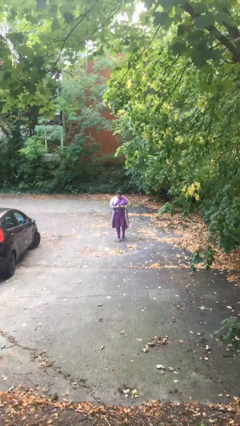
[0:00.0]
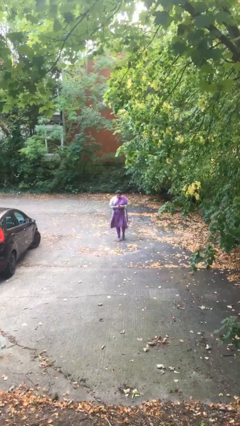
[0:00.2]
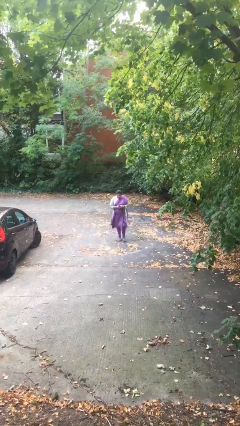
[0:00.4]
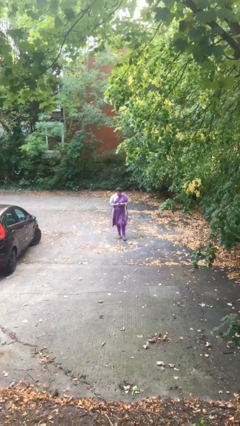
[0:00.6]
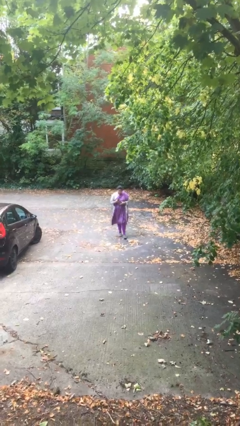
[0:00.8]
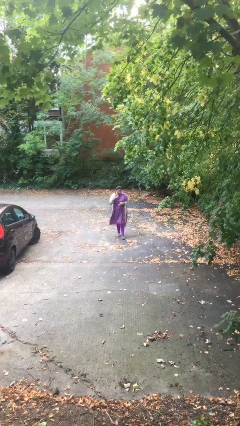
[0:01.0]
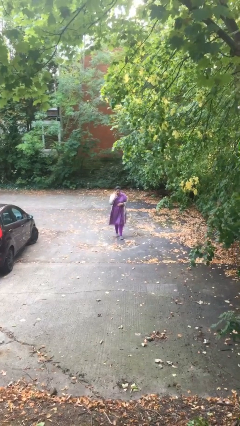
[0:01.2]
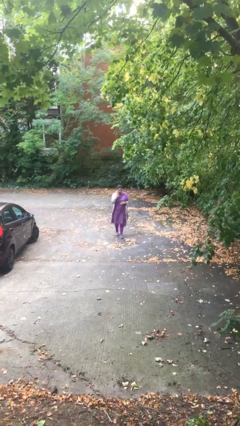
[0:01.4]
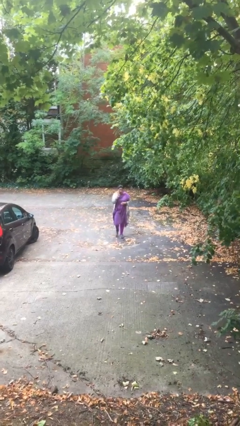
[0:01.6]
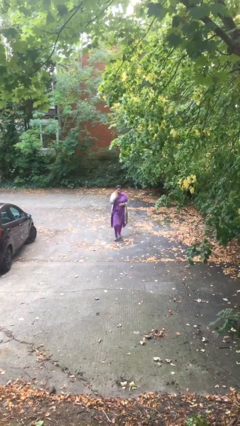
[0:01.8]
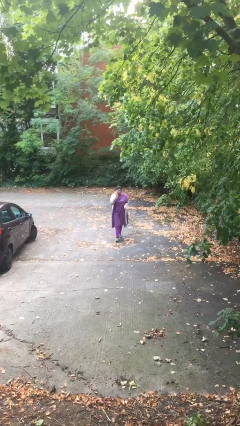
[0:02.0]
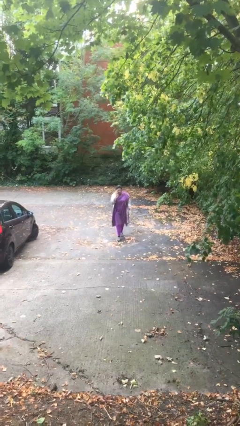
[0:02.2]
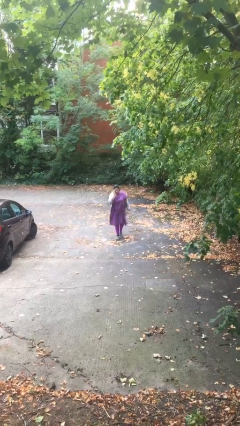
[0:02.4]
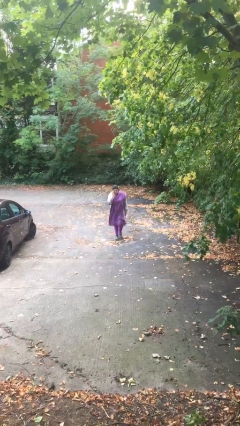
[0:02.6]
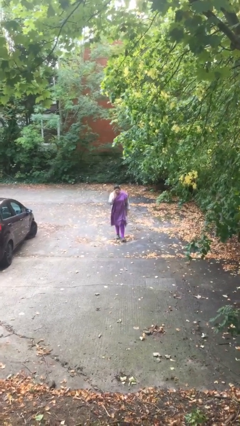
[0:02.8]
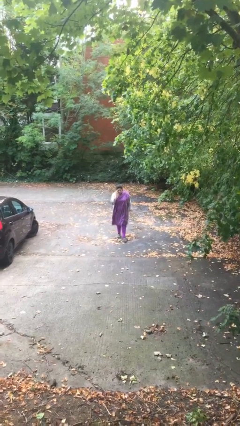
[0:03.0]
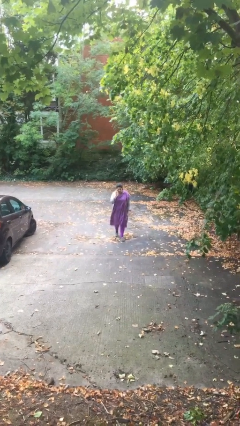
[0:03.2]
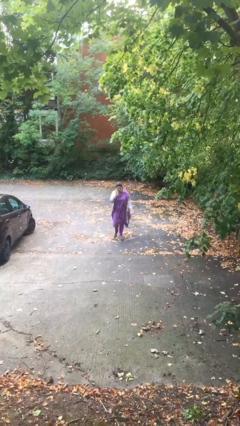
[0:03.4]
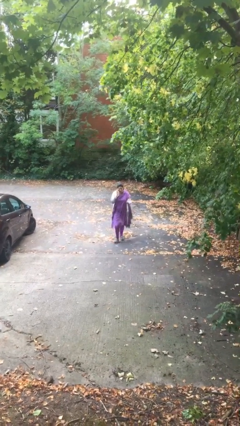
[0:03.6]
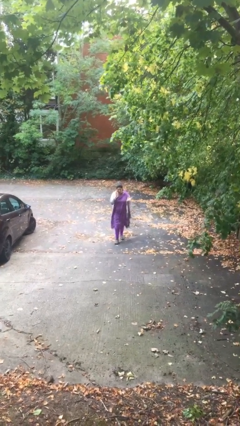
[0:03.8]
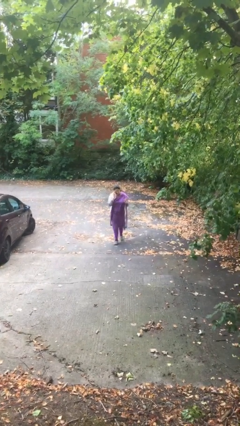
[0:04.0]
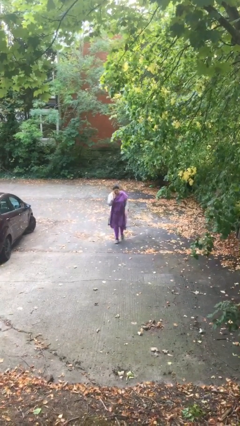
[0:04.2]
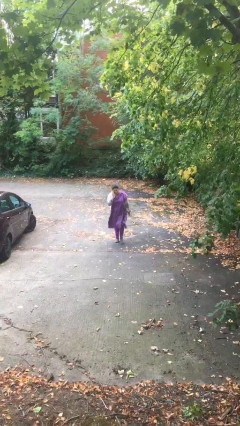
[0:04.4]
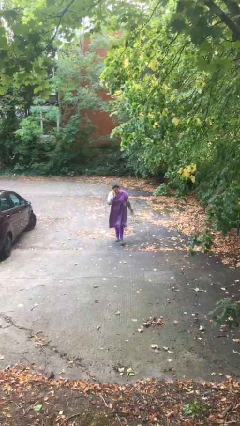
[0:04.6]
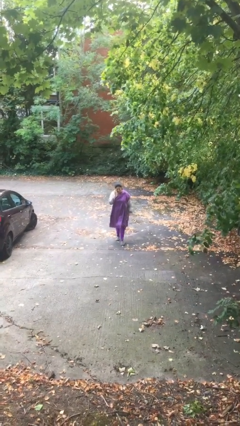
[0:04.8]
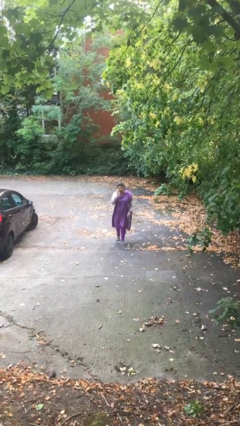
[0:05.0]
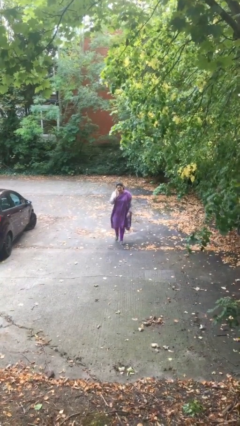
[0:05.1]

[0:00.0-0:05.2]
person talks on phone

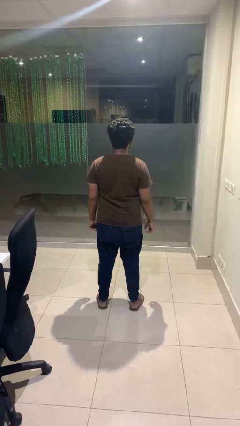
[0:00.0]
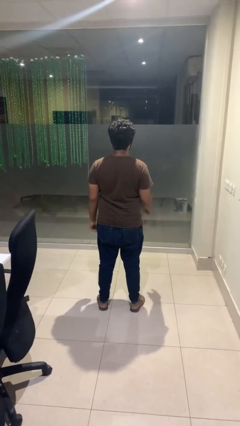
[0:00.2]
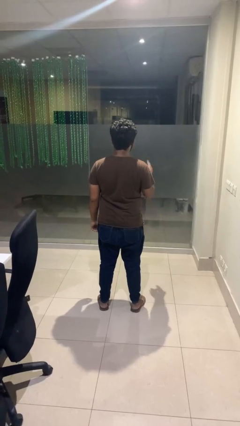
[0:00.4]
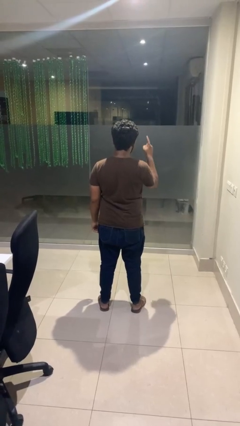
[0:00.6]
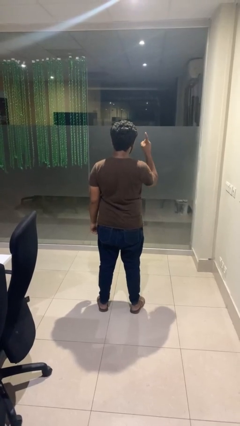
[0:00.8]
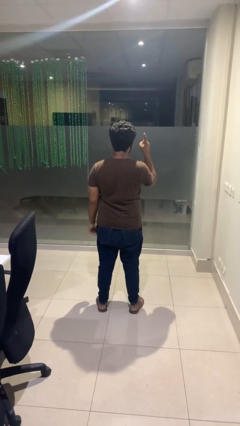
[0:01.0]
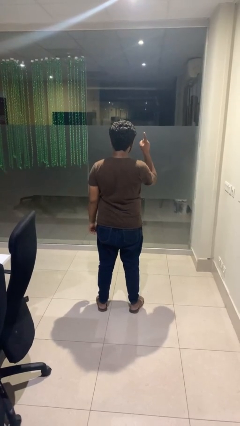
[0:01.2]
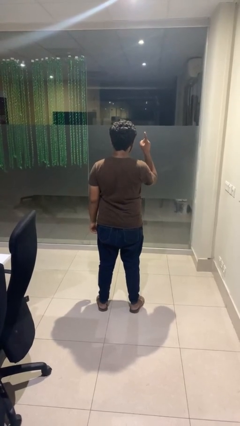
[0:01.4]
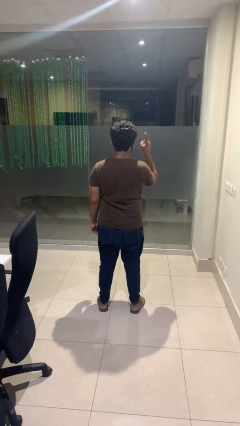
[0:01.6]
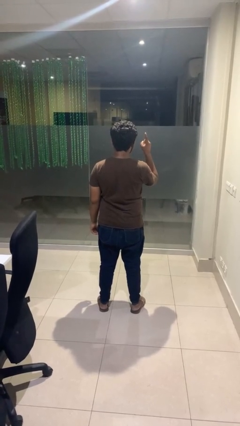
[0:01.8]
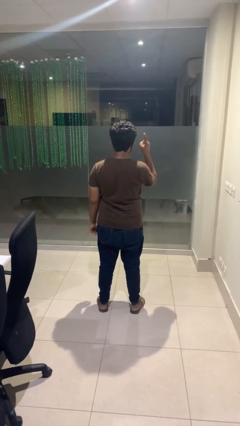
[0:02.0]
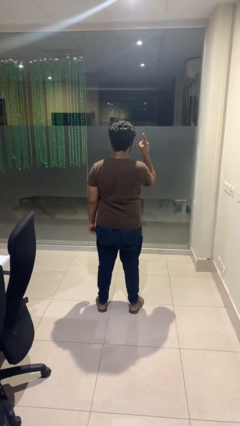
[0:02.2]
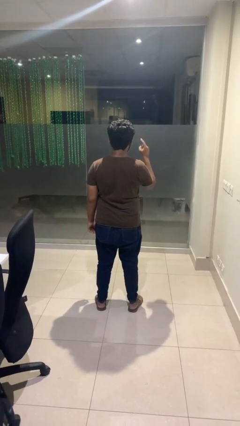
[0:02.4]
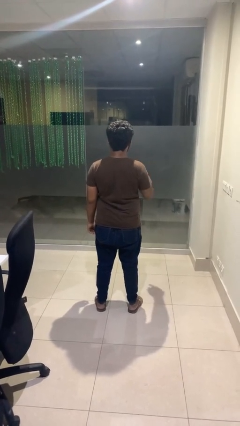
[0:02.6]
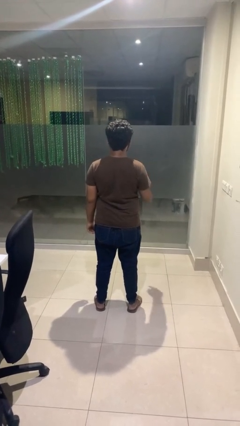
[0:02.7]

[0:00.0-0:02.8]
person gestures number one

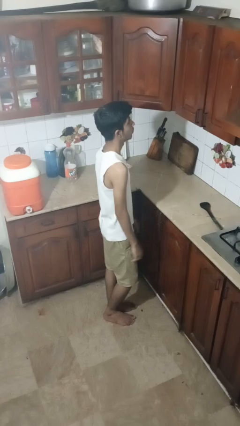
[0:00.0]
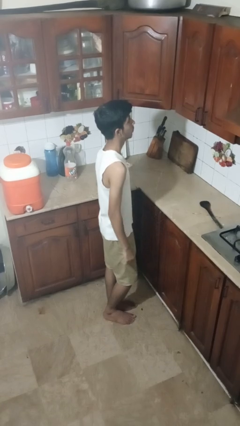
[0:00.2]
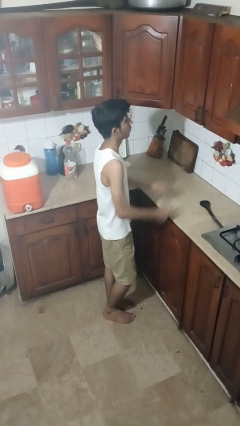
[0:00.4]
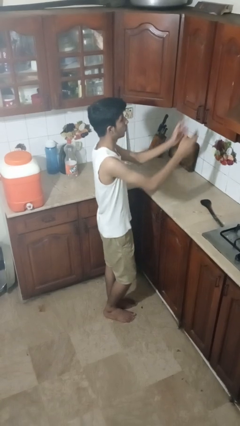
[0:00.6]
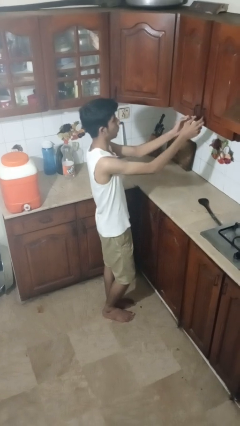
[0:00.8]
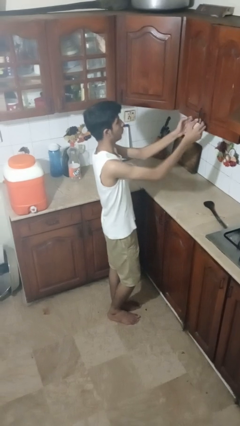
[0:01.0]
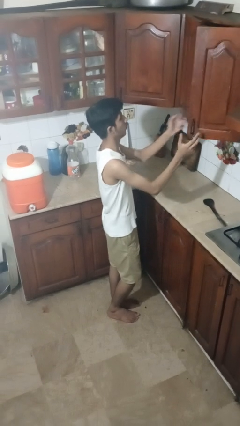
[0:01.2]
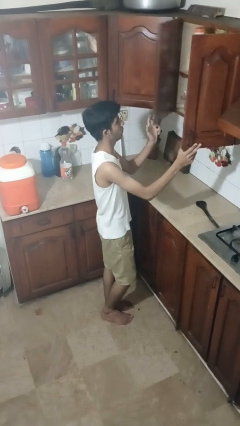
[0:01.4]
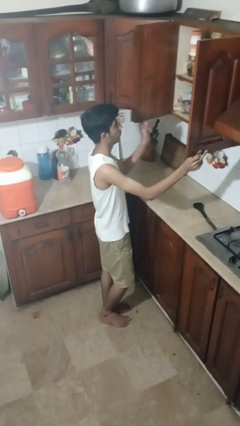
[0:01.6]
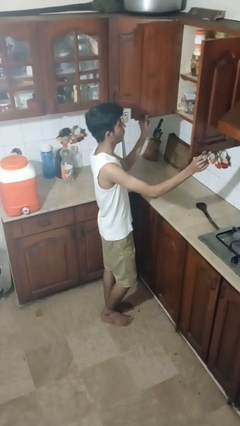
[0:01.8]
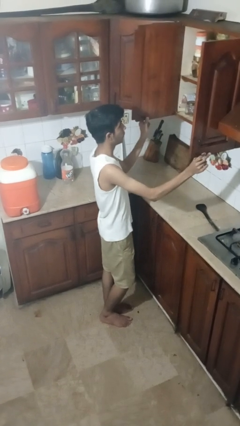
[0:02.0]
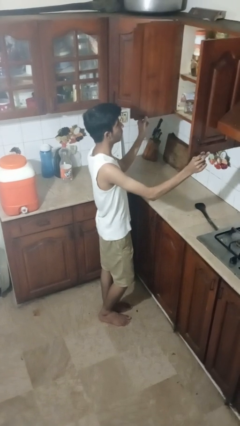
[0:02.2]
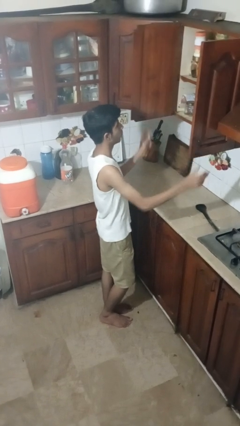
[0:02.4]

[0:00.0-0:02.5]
person opens cabinet

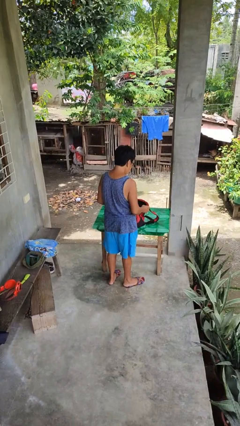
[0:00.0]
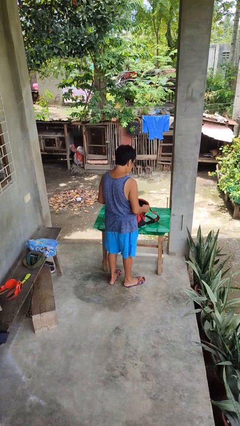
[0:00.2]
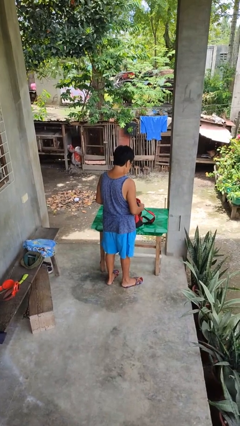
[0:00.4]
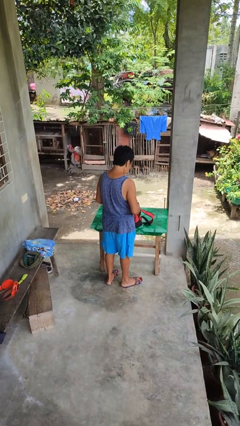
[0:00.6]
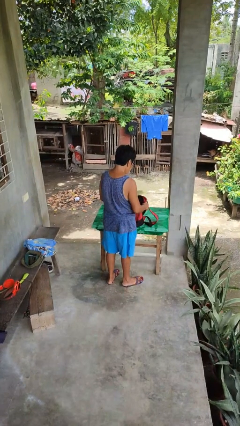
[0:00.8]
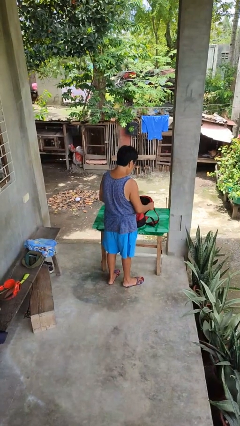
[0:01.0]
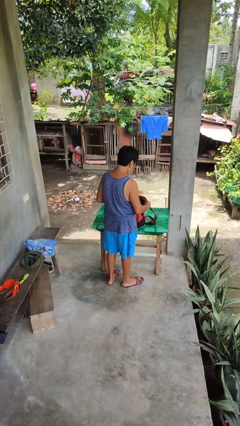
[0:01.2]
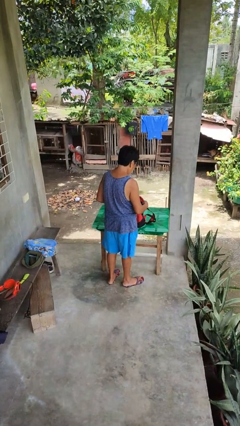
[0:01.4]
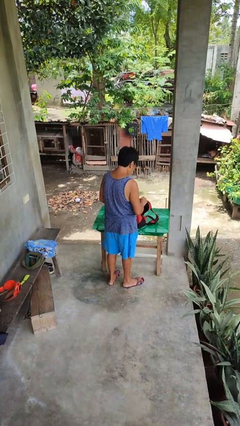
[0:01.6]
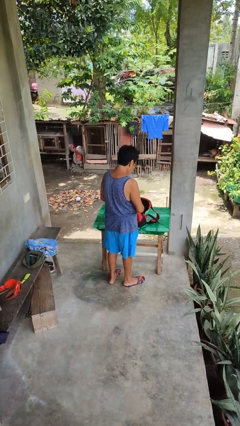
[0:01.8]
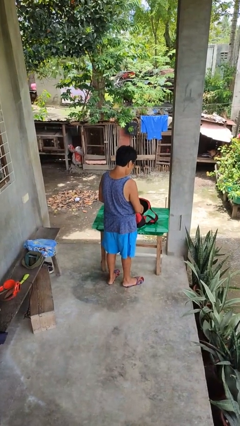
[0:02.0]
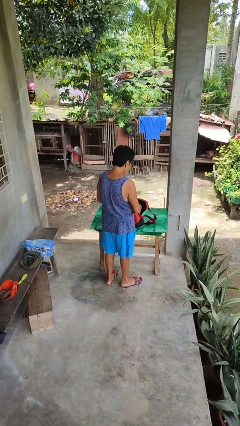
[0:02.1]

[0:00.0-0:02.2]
person searches in backpack

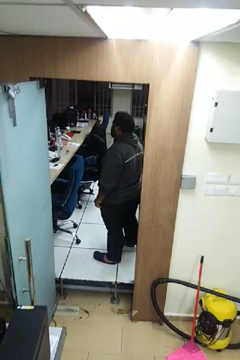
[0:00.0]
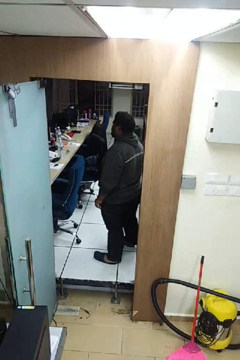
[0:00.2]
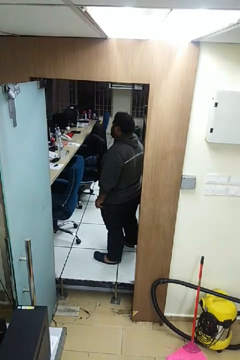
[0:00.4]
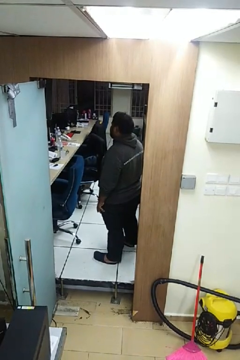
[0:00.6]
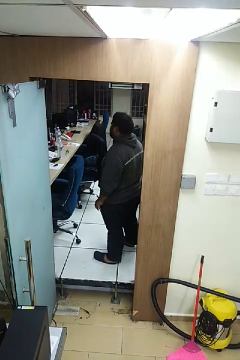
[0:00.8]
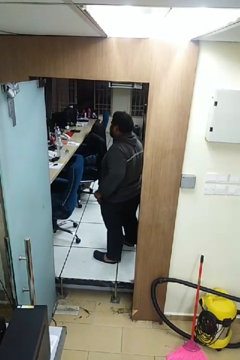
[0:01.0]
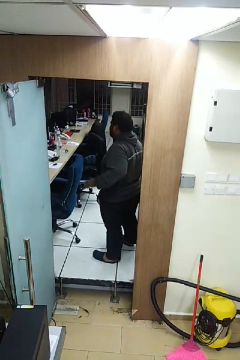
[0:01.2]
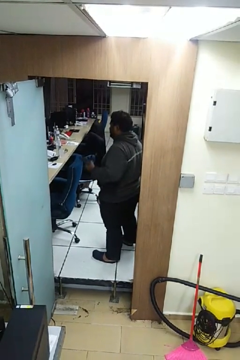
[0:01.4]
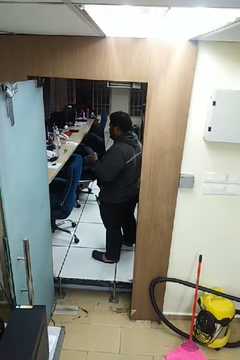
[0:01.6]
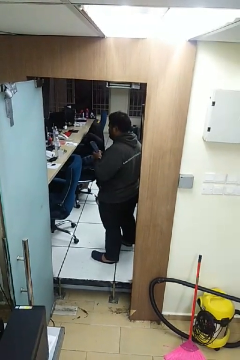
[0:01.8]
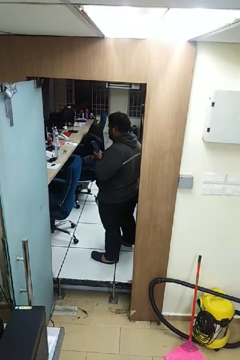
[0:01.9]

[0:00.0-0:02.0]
person takes phone from pocket

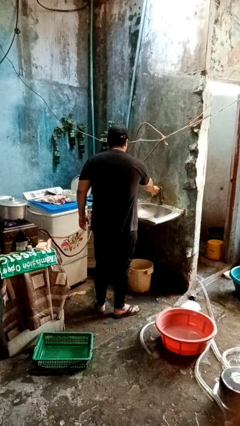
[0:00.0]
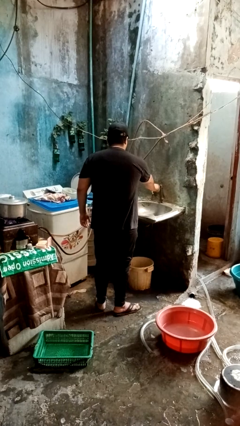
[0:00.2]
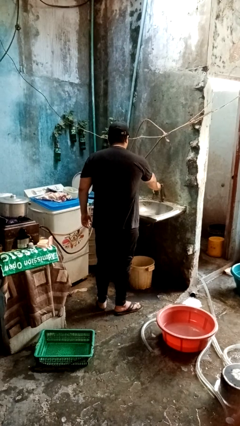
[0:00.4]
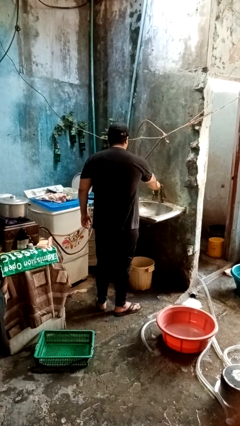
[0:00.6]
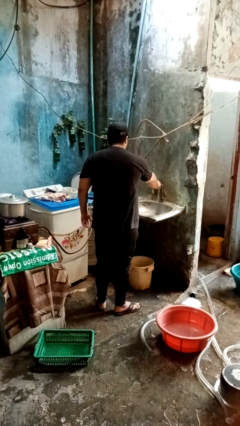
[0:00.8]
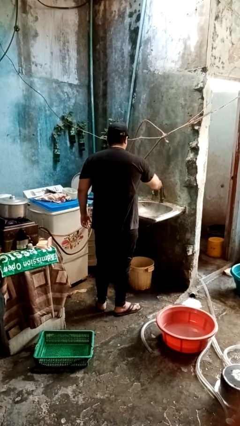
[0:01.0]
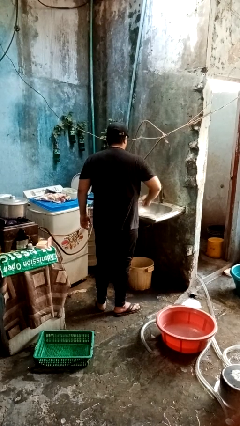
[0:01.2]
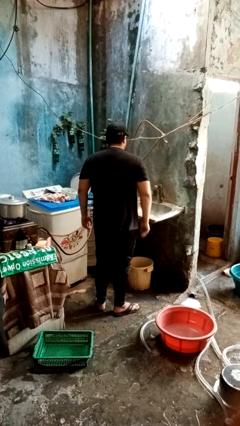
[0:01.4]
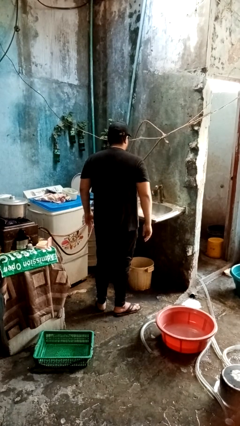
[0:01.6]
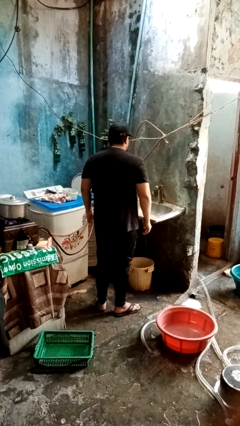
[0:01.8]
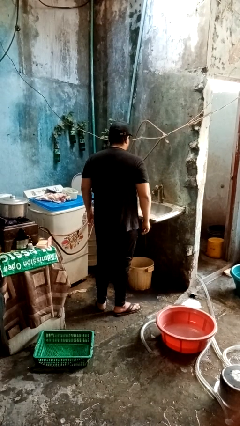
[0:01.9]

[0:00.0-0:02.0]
person turns on faucet

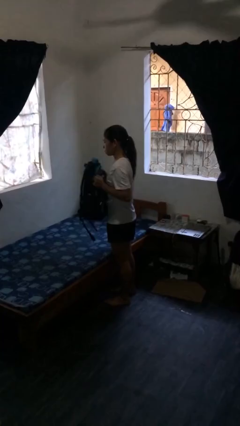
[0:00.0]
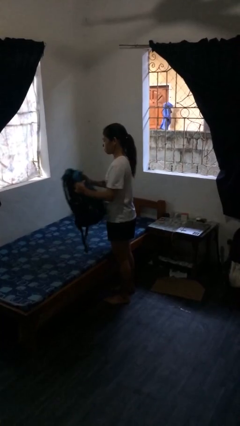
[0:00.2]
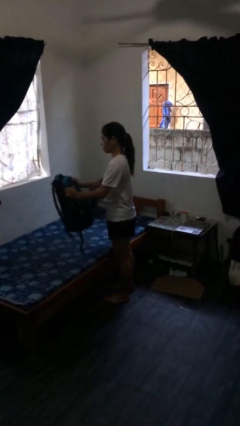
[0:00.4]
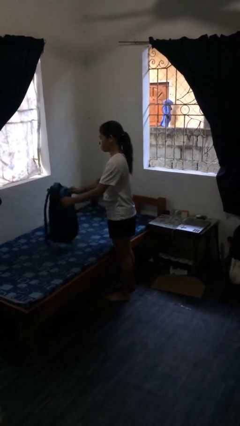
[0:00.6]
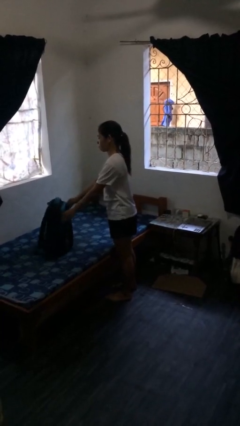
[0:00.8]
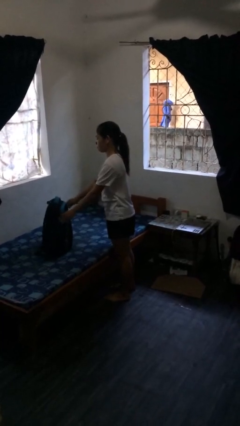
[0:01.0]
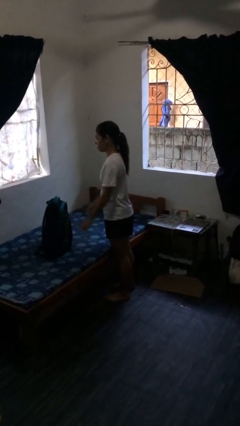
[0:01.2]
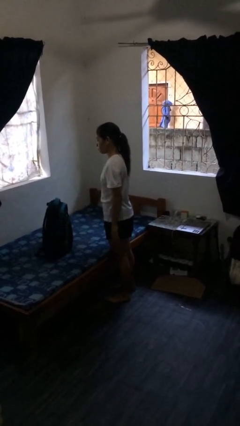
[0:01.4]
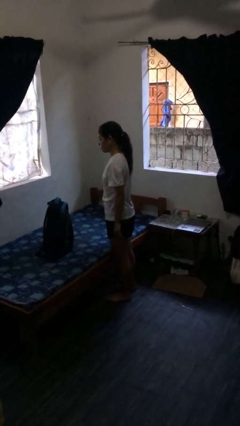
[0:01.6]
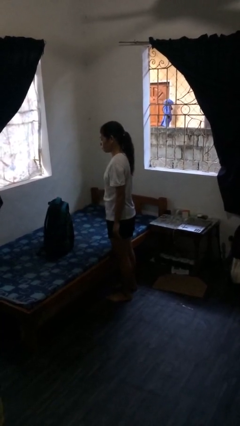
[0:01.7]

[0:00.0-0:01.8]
person puts down object on bed
